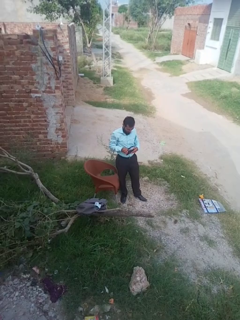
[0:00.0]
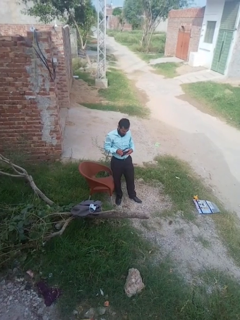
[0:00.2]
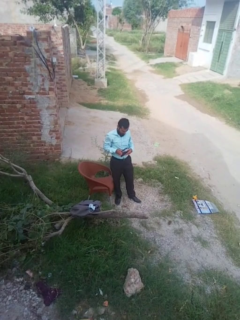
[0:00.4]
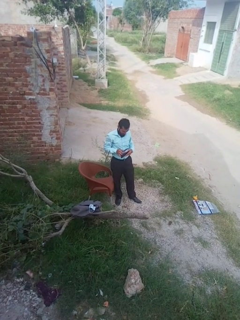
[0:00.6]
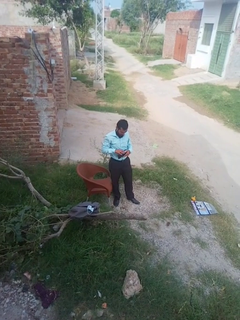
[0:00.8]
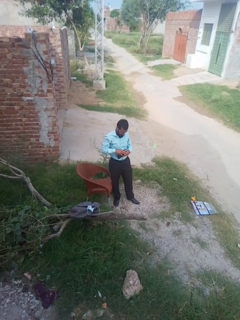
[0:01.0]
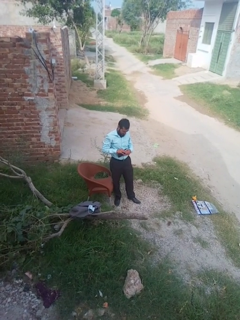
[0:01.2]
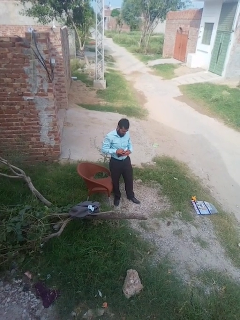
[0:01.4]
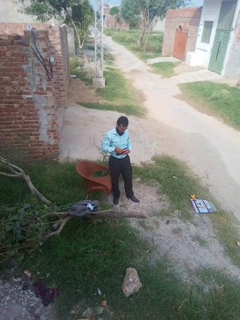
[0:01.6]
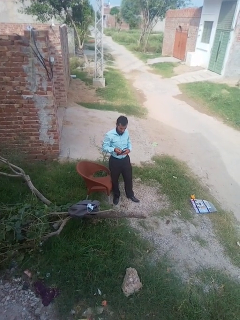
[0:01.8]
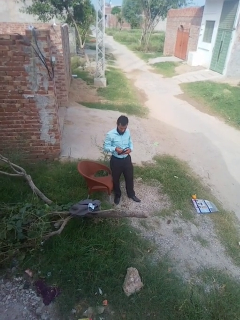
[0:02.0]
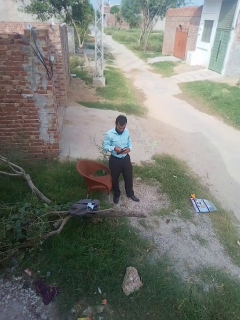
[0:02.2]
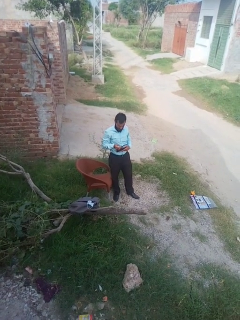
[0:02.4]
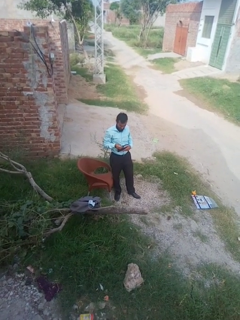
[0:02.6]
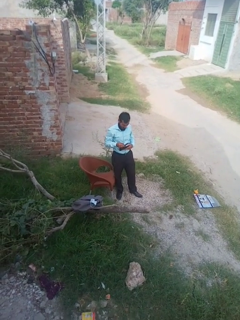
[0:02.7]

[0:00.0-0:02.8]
person takes object from purse

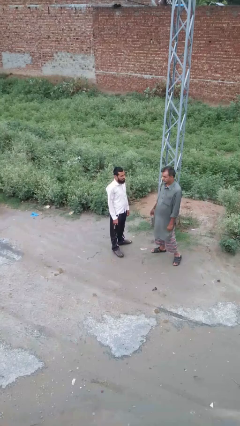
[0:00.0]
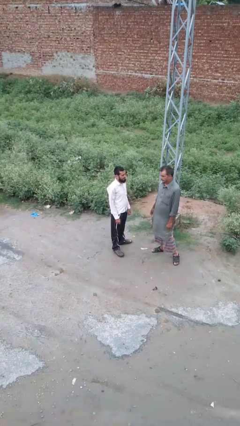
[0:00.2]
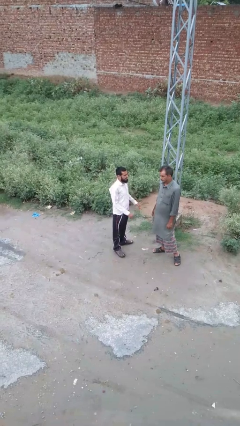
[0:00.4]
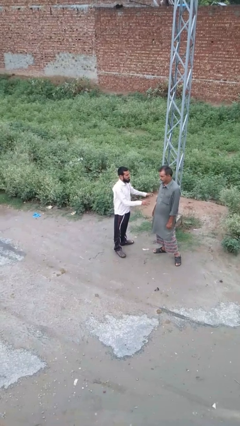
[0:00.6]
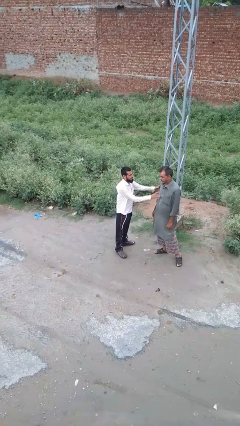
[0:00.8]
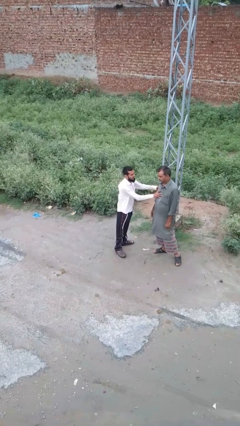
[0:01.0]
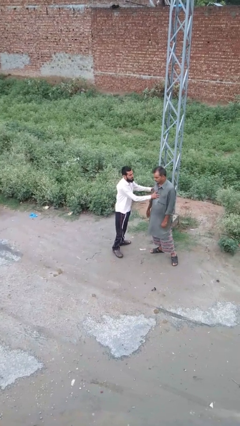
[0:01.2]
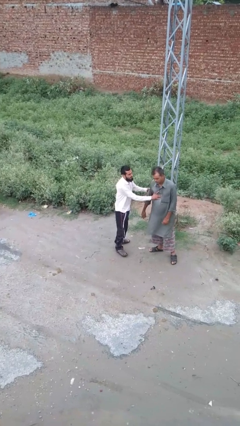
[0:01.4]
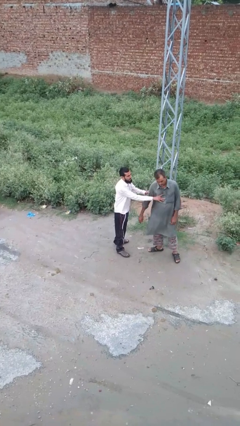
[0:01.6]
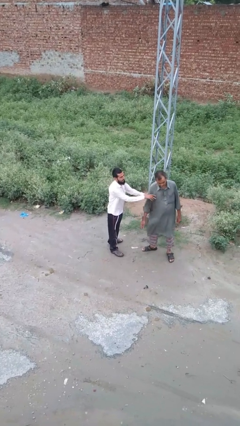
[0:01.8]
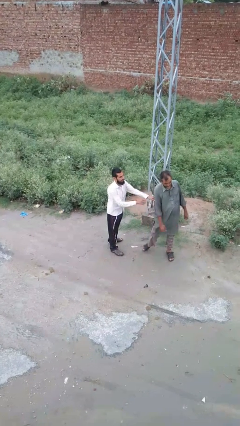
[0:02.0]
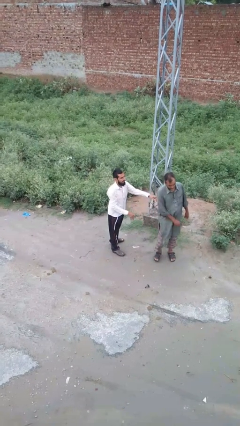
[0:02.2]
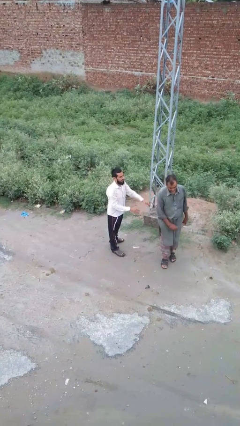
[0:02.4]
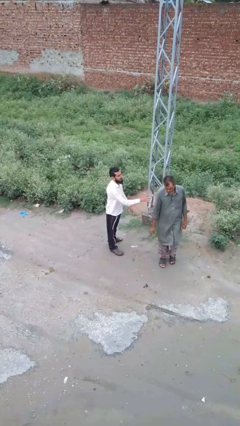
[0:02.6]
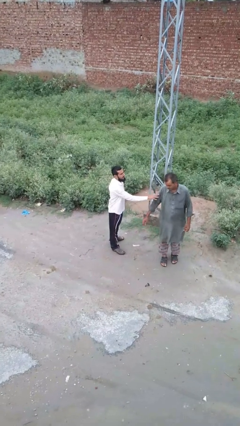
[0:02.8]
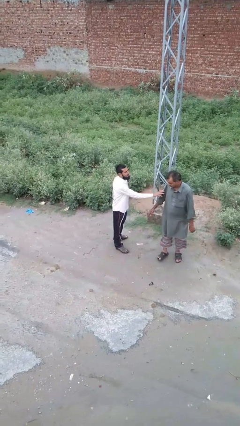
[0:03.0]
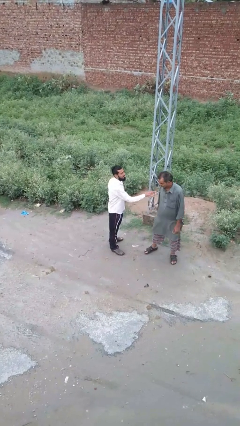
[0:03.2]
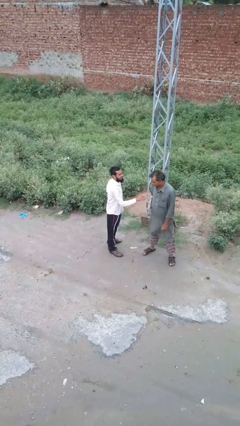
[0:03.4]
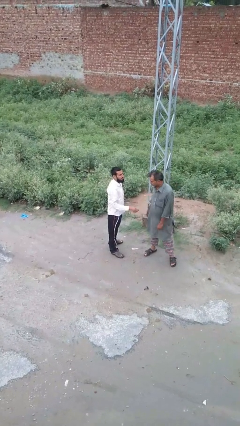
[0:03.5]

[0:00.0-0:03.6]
person shoves person

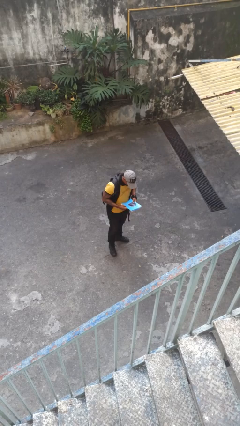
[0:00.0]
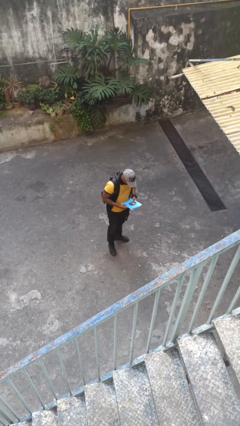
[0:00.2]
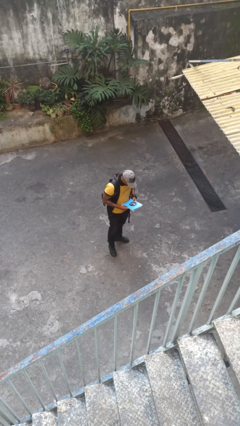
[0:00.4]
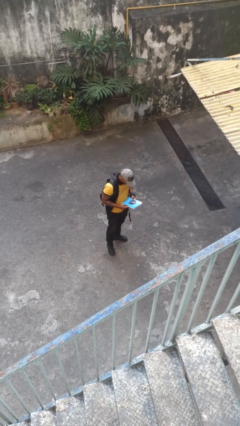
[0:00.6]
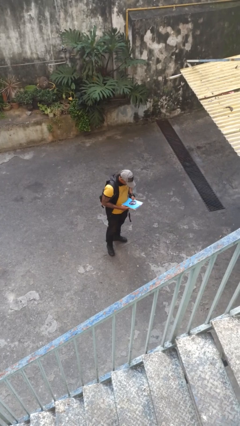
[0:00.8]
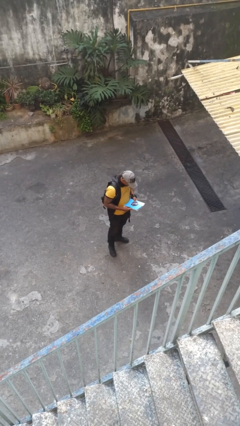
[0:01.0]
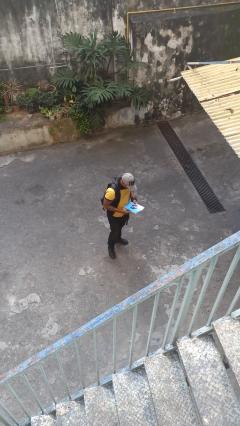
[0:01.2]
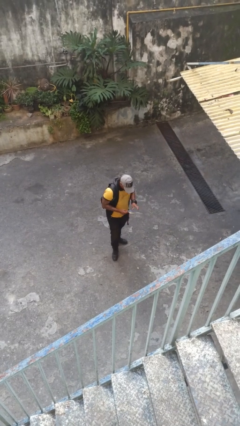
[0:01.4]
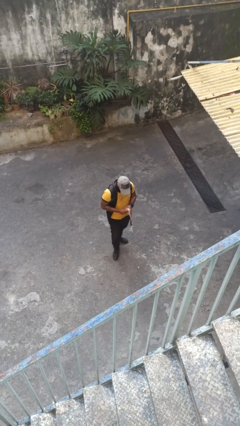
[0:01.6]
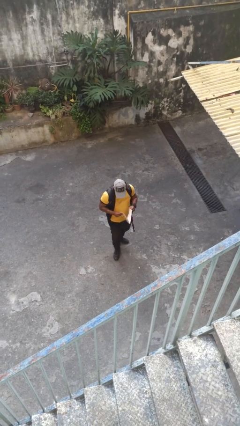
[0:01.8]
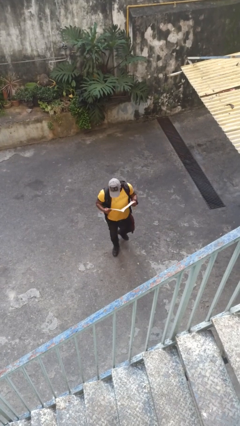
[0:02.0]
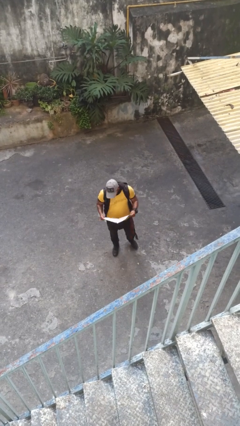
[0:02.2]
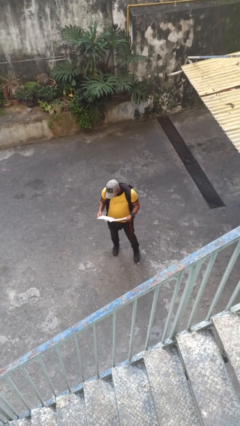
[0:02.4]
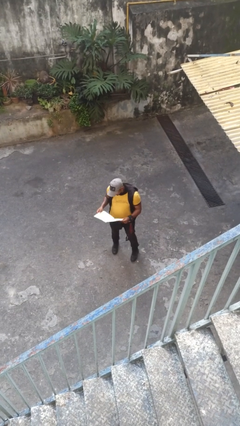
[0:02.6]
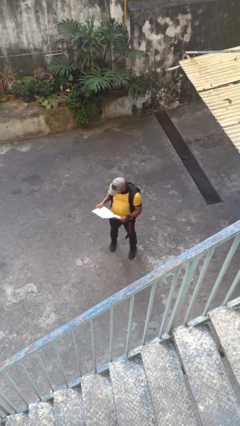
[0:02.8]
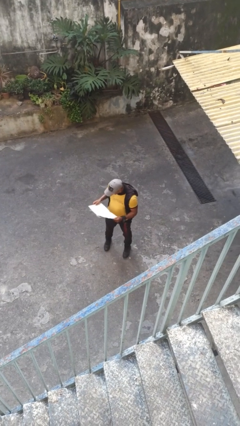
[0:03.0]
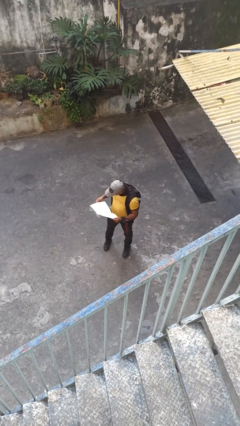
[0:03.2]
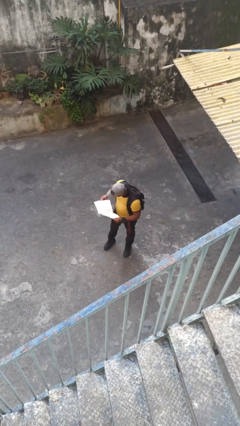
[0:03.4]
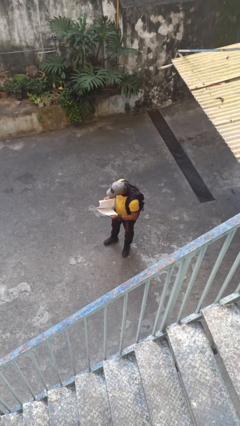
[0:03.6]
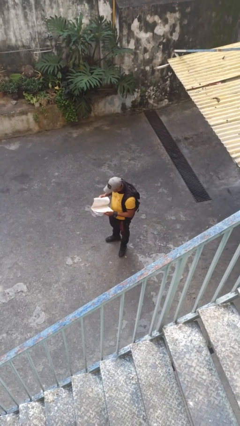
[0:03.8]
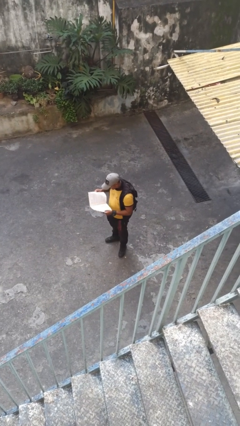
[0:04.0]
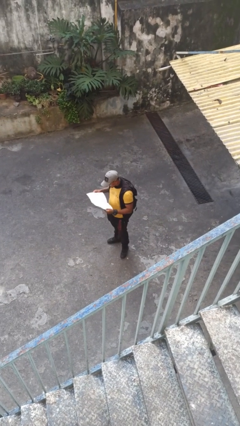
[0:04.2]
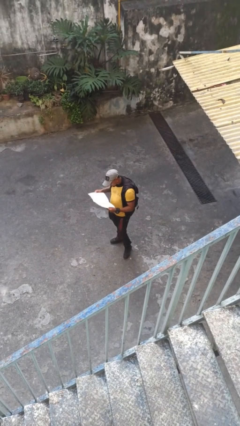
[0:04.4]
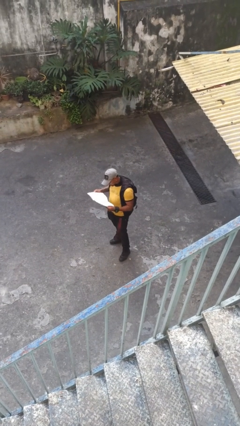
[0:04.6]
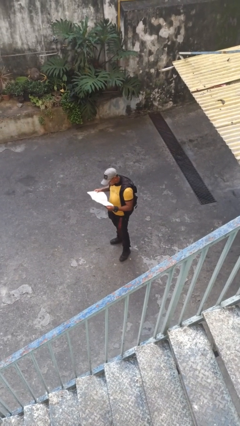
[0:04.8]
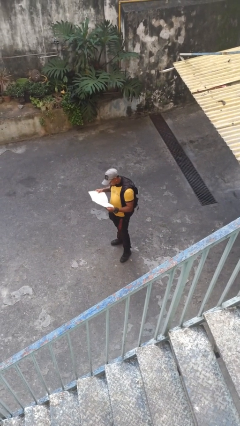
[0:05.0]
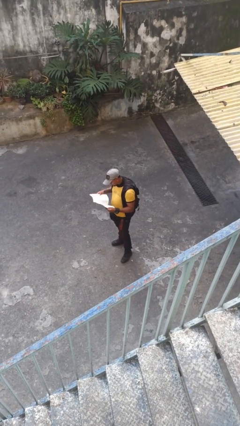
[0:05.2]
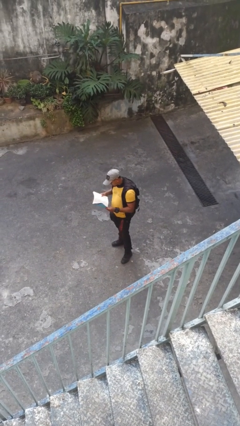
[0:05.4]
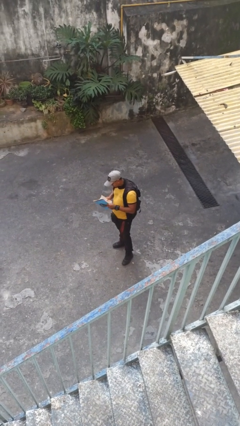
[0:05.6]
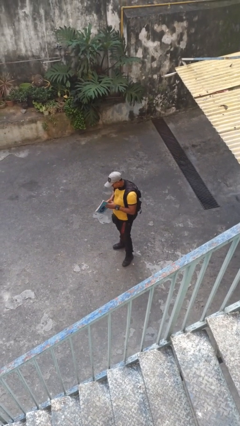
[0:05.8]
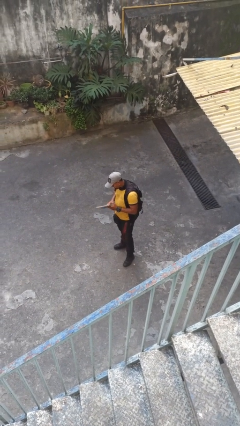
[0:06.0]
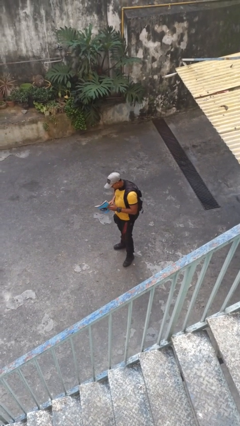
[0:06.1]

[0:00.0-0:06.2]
person reads document

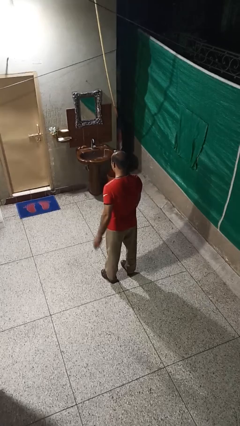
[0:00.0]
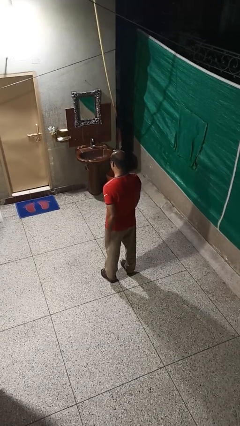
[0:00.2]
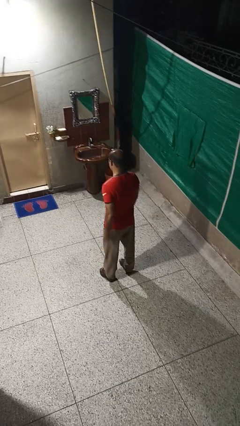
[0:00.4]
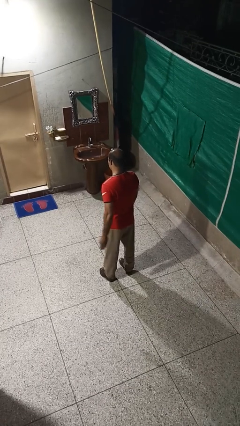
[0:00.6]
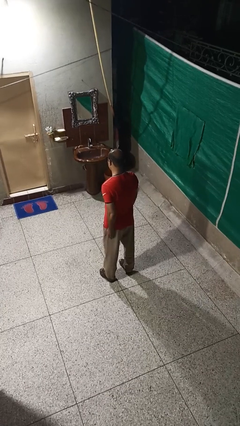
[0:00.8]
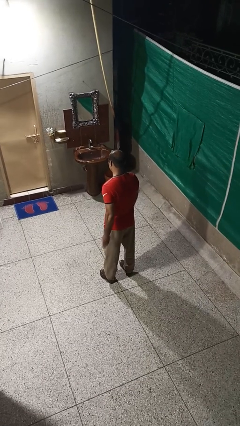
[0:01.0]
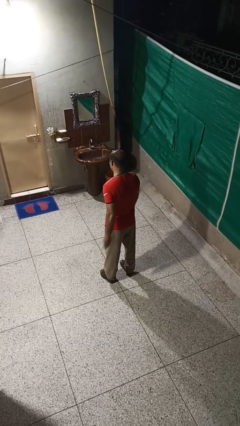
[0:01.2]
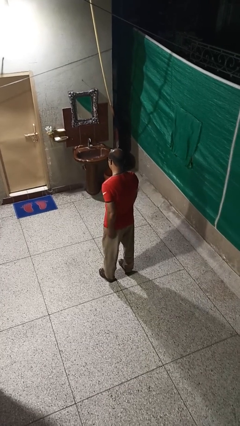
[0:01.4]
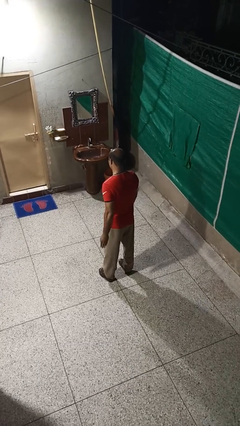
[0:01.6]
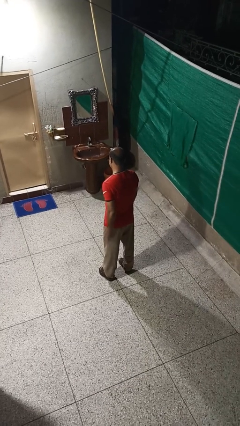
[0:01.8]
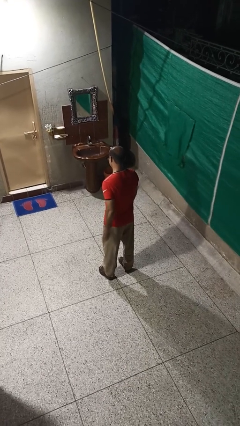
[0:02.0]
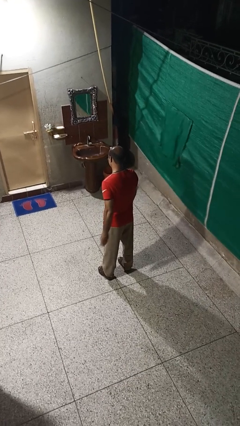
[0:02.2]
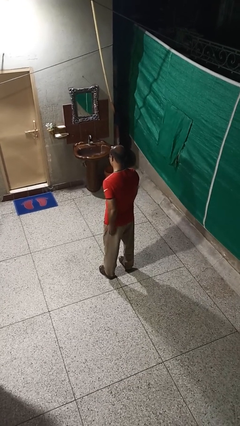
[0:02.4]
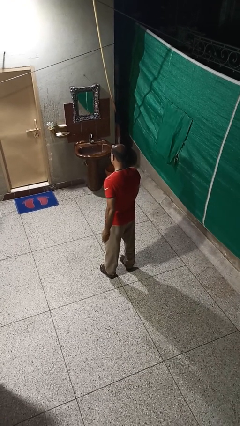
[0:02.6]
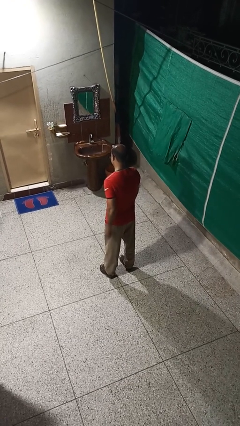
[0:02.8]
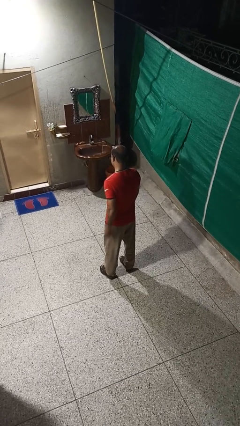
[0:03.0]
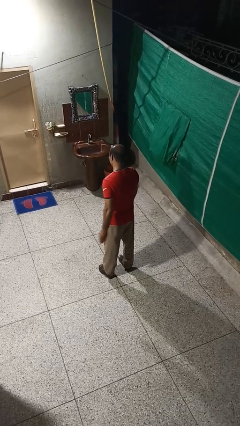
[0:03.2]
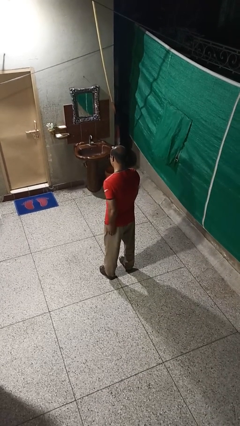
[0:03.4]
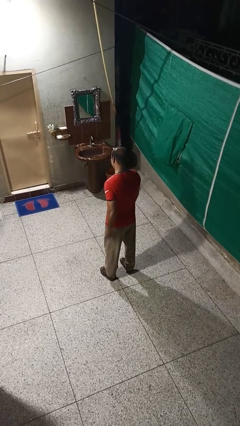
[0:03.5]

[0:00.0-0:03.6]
person slaps hands on thighs

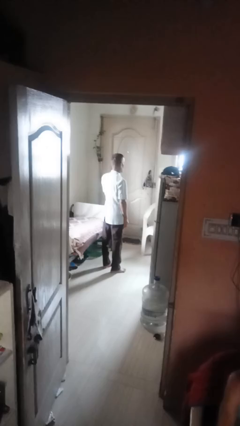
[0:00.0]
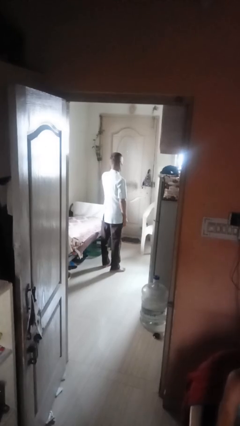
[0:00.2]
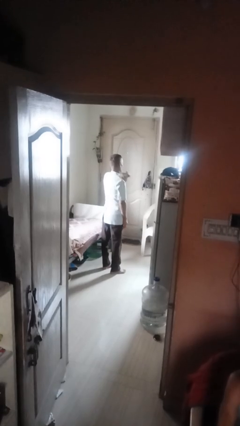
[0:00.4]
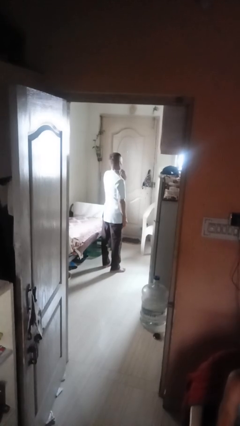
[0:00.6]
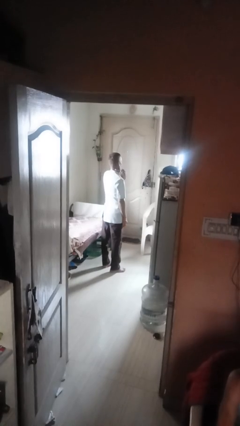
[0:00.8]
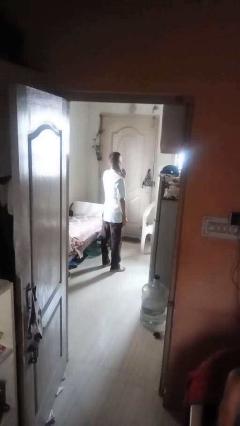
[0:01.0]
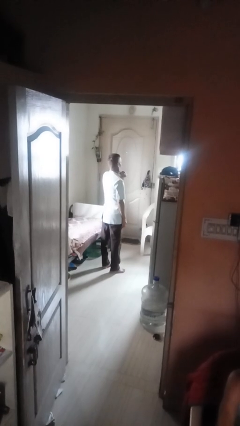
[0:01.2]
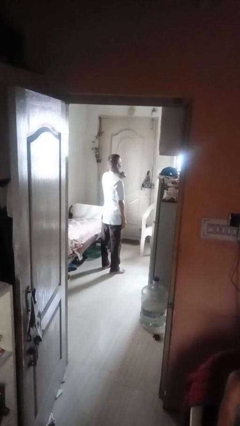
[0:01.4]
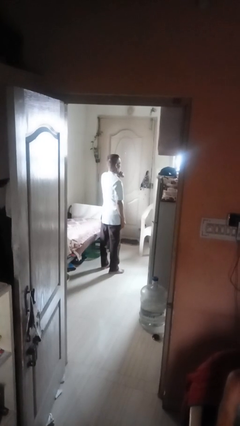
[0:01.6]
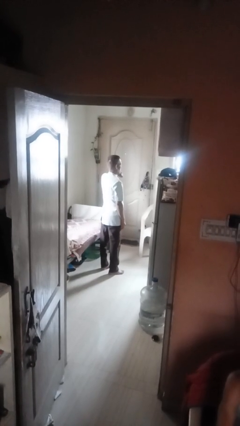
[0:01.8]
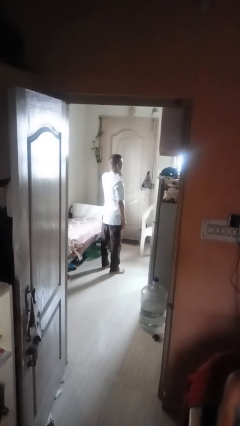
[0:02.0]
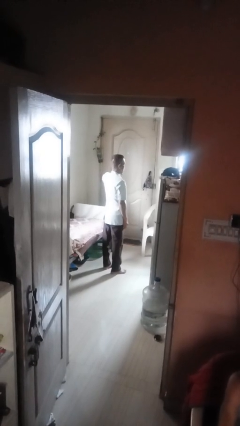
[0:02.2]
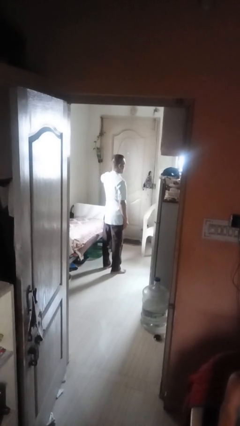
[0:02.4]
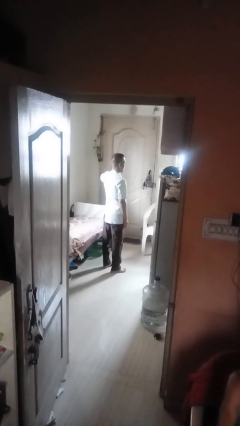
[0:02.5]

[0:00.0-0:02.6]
person gestures cut
